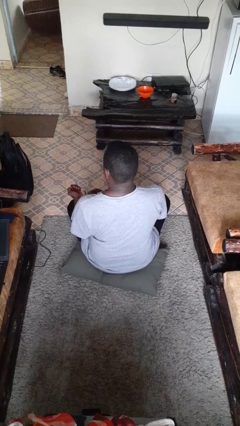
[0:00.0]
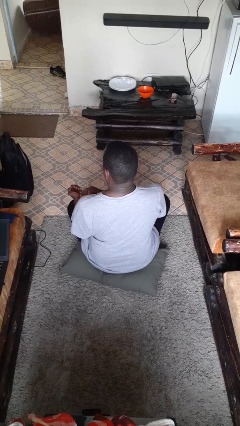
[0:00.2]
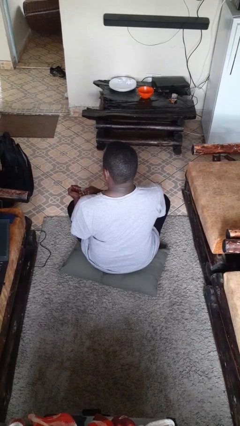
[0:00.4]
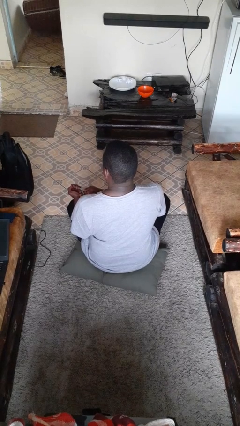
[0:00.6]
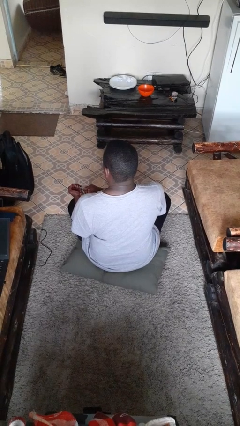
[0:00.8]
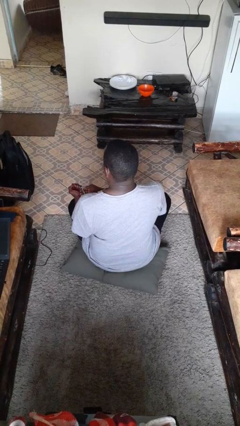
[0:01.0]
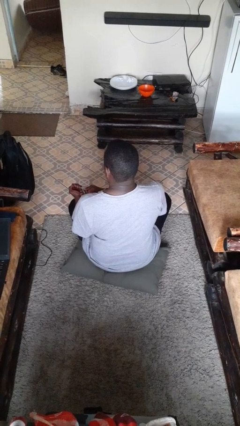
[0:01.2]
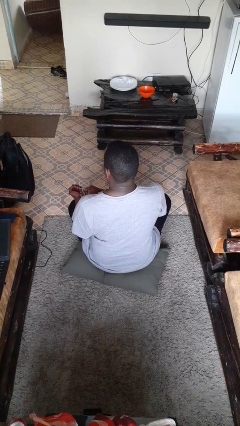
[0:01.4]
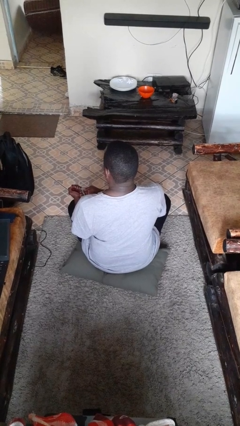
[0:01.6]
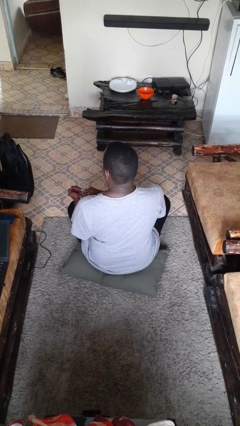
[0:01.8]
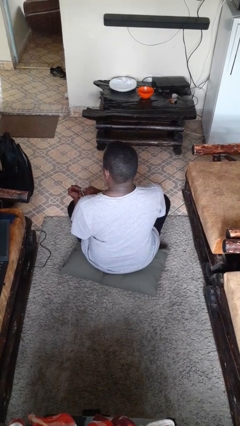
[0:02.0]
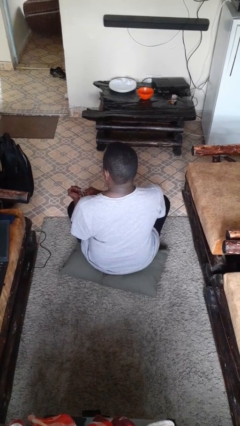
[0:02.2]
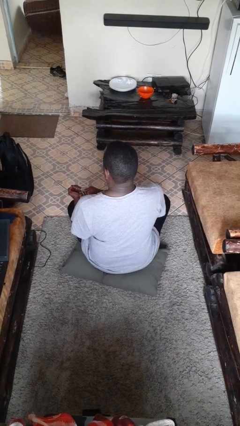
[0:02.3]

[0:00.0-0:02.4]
person clips fingernails

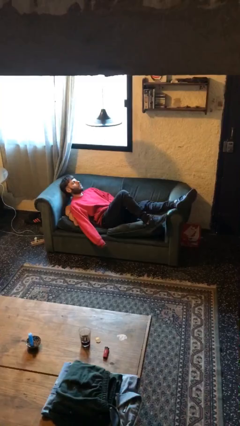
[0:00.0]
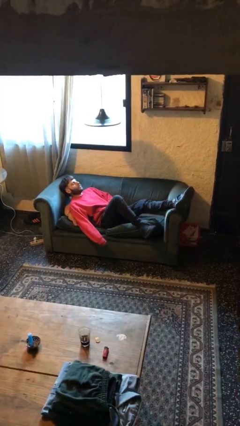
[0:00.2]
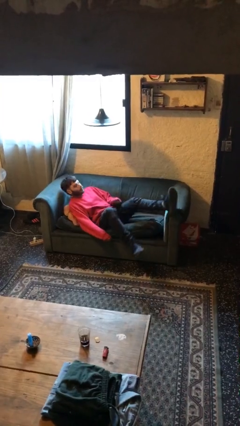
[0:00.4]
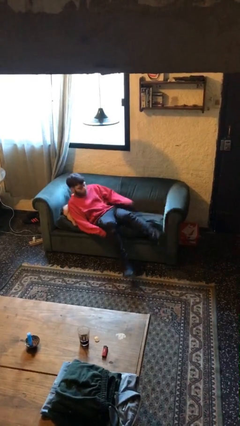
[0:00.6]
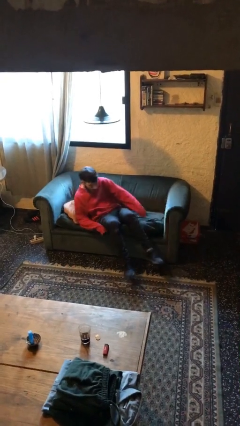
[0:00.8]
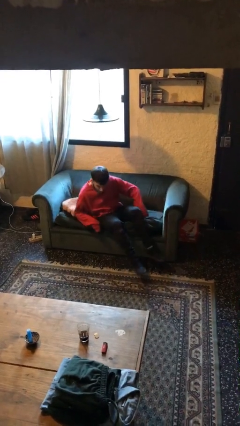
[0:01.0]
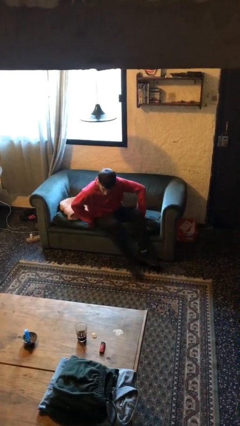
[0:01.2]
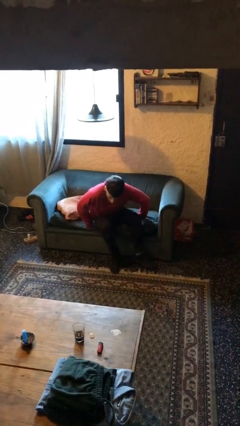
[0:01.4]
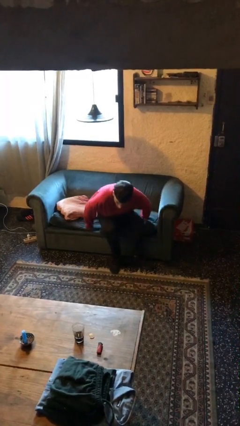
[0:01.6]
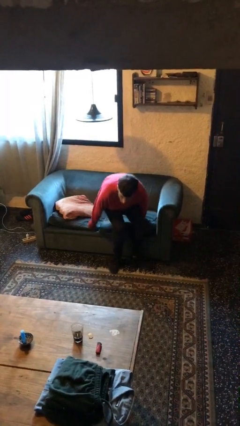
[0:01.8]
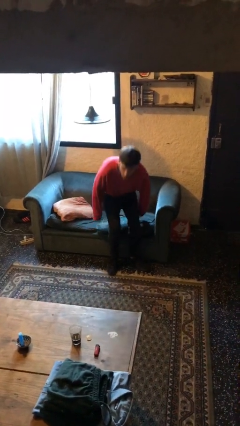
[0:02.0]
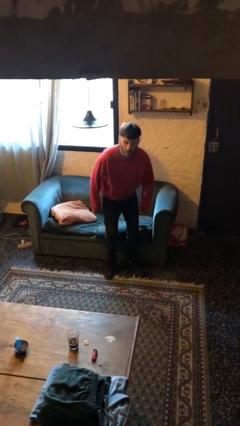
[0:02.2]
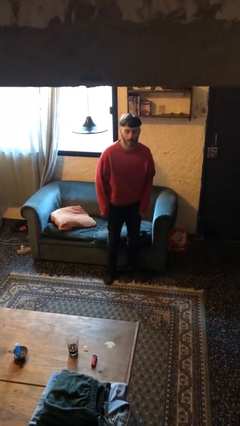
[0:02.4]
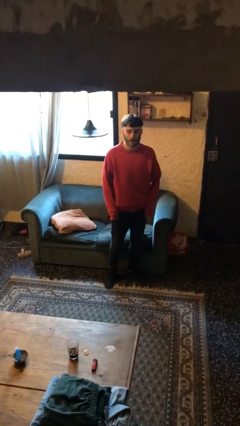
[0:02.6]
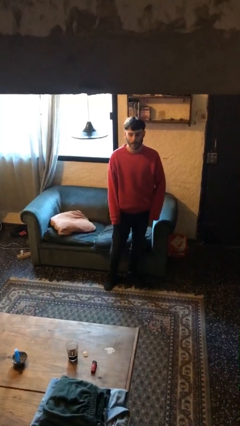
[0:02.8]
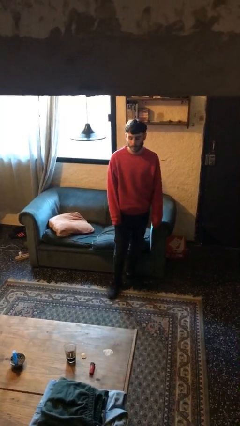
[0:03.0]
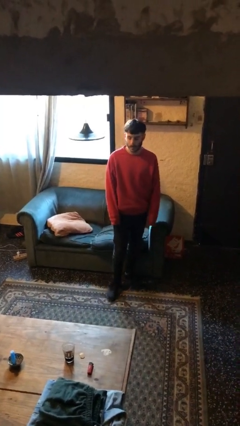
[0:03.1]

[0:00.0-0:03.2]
person stands up

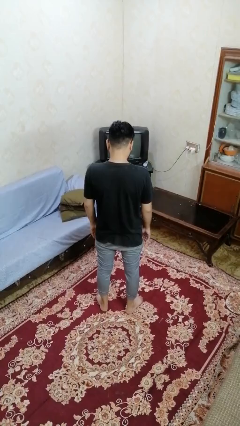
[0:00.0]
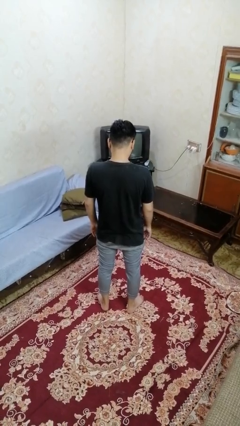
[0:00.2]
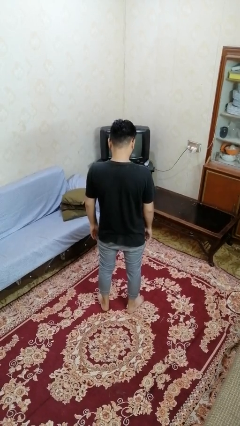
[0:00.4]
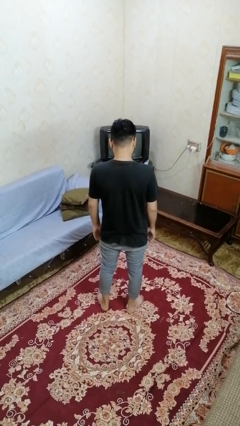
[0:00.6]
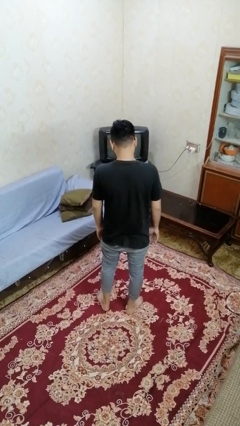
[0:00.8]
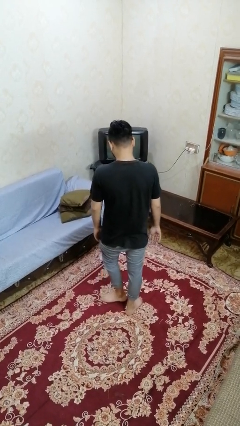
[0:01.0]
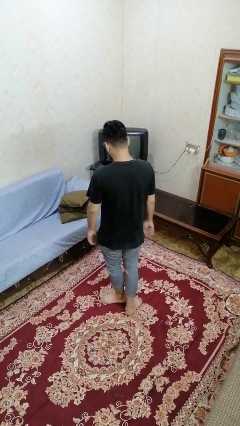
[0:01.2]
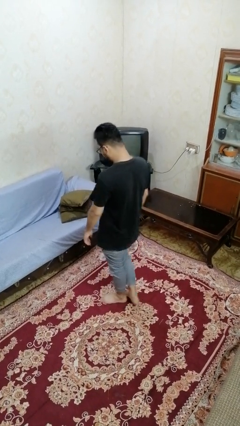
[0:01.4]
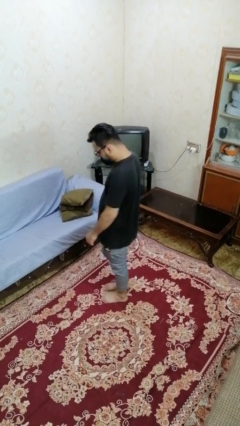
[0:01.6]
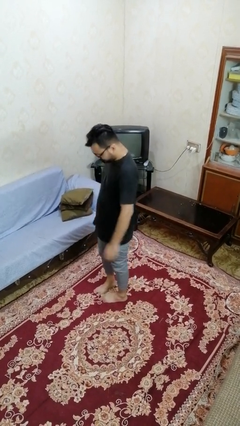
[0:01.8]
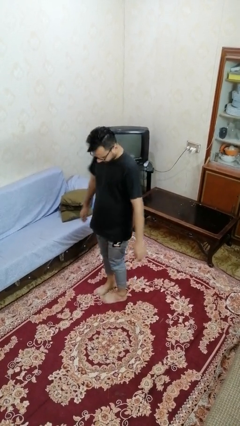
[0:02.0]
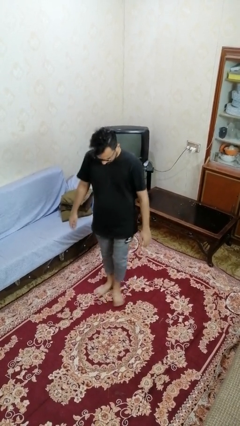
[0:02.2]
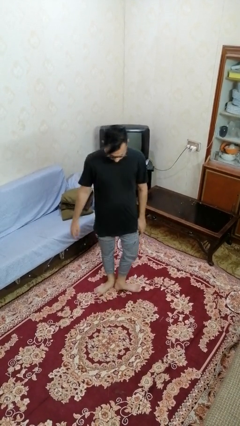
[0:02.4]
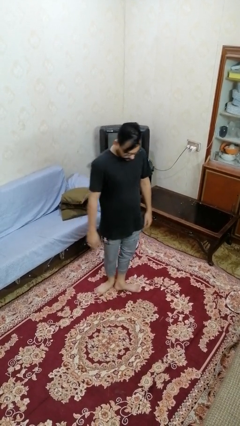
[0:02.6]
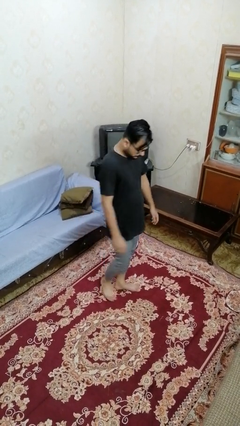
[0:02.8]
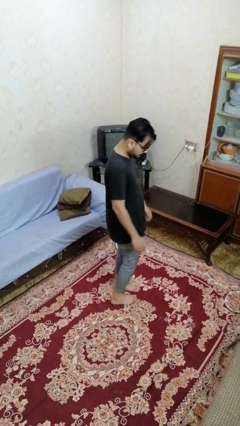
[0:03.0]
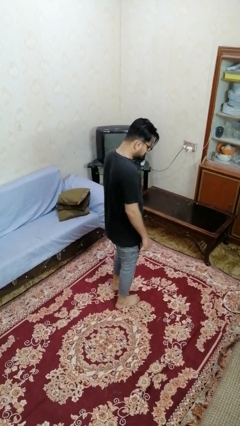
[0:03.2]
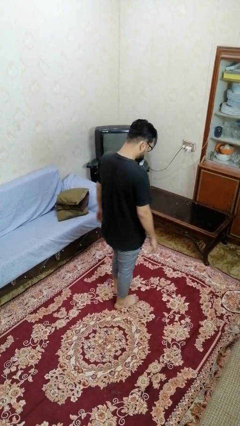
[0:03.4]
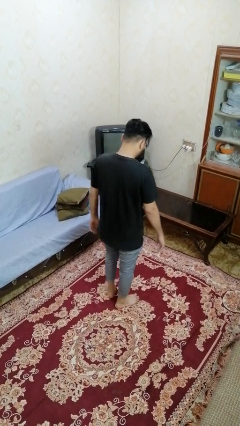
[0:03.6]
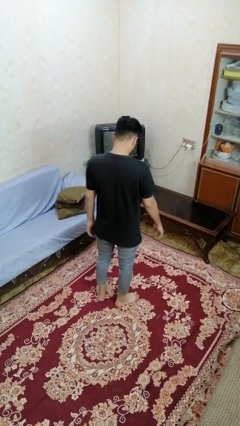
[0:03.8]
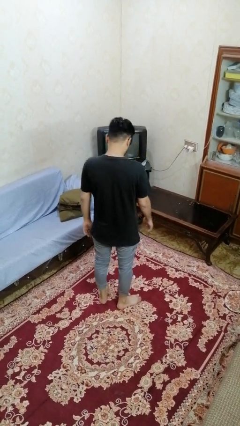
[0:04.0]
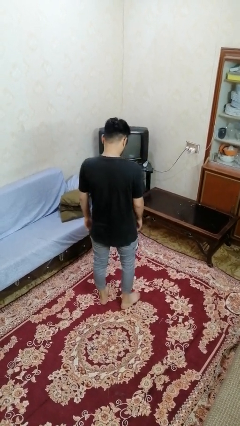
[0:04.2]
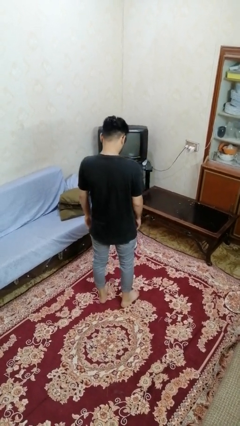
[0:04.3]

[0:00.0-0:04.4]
person twirls

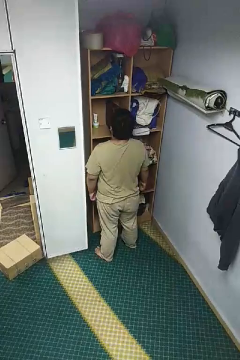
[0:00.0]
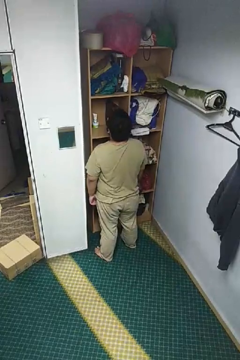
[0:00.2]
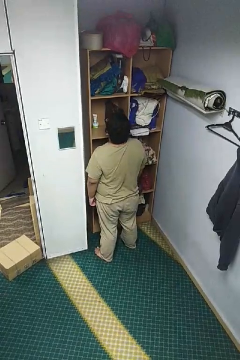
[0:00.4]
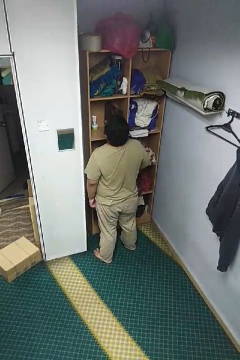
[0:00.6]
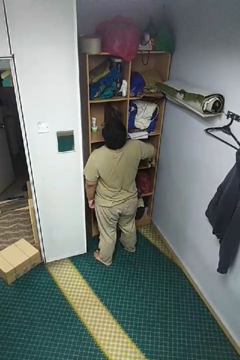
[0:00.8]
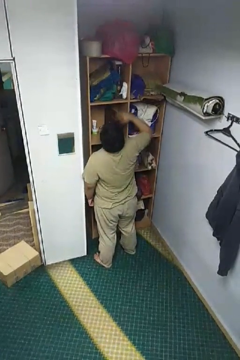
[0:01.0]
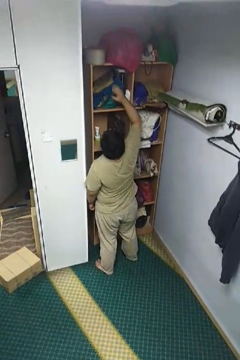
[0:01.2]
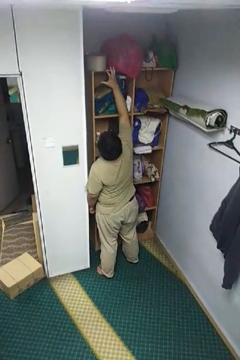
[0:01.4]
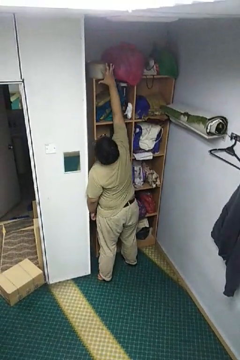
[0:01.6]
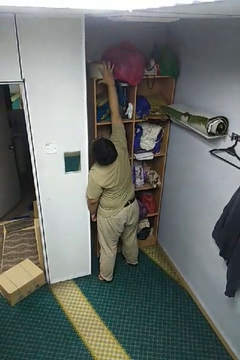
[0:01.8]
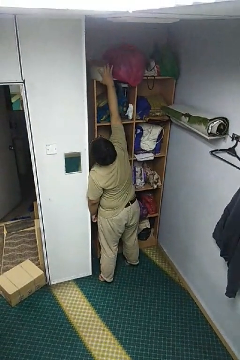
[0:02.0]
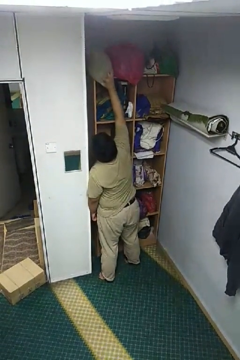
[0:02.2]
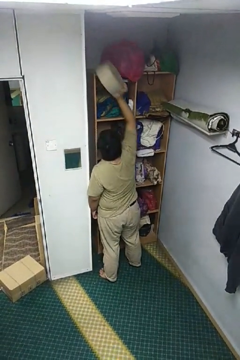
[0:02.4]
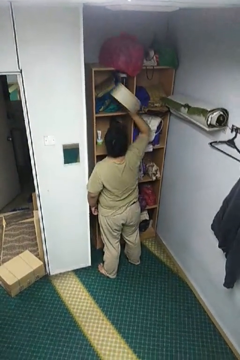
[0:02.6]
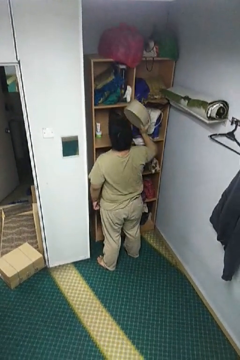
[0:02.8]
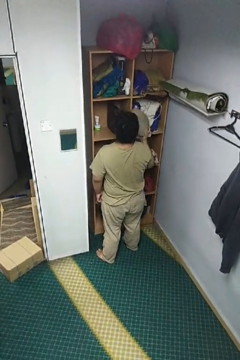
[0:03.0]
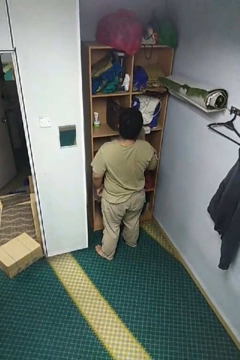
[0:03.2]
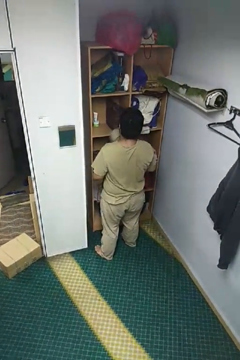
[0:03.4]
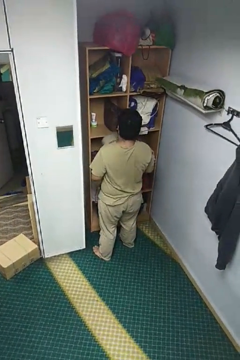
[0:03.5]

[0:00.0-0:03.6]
person picks up object from shelf

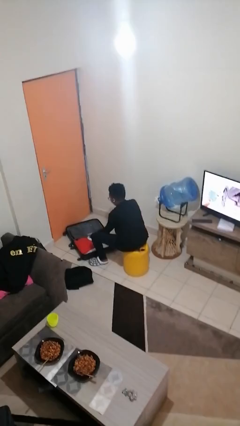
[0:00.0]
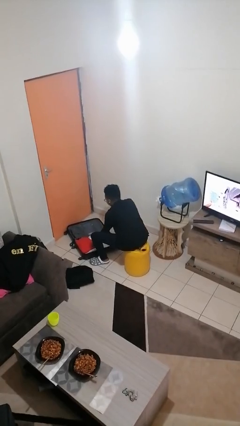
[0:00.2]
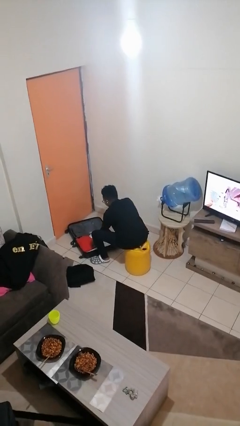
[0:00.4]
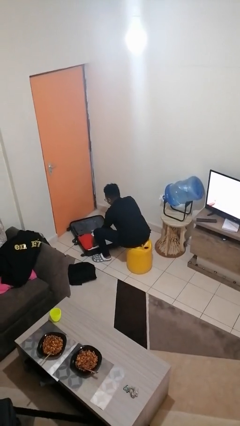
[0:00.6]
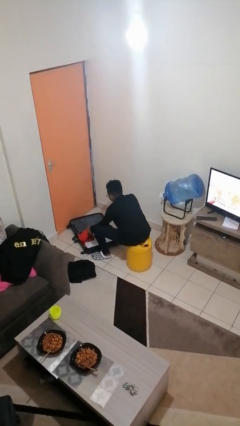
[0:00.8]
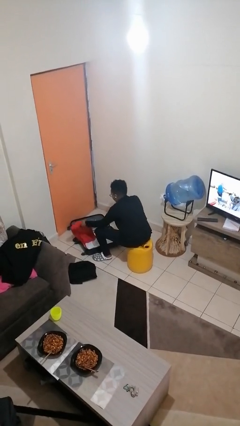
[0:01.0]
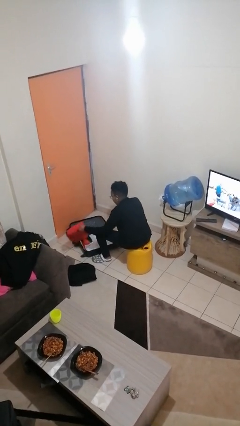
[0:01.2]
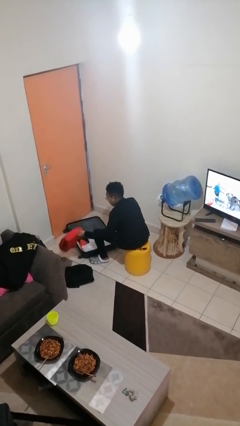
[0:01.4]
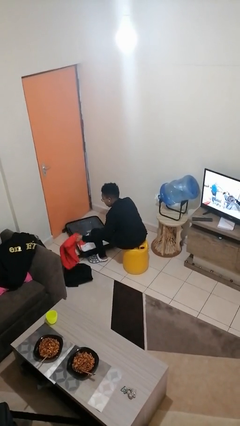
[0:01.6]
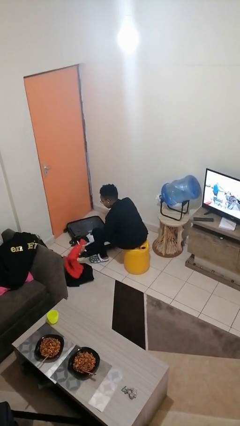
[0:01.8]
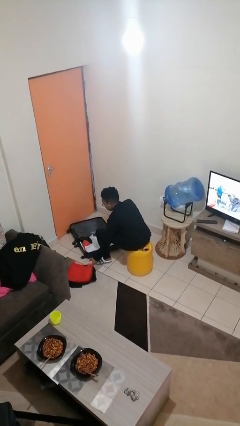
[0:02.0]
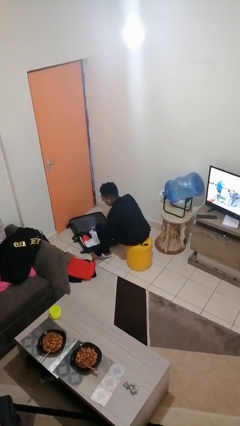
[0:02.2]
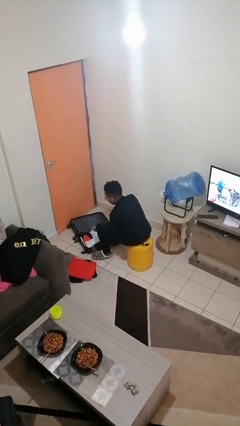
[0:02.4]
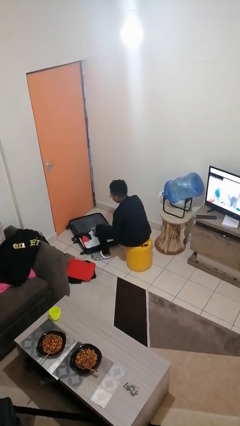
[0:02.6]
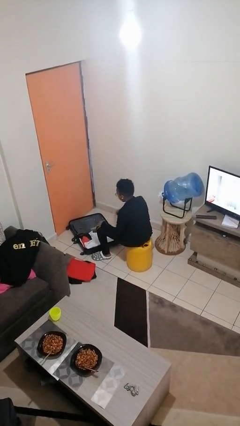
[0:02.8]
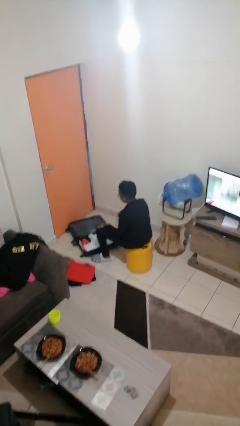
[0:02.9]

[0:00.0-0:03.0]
person unloads clothes from suitcase

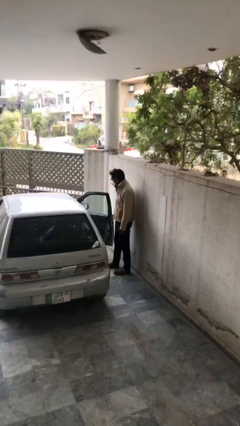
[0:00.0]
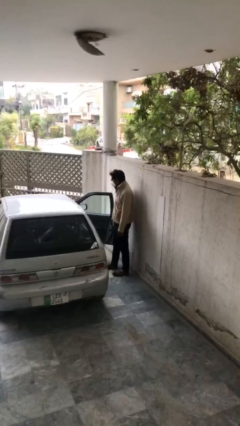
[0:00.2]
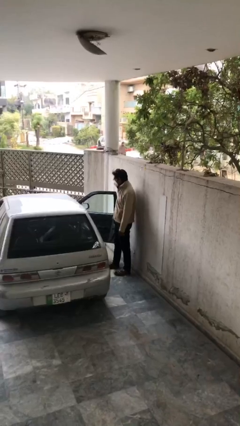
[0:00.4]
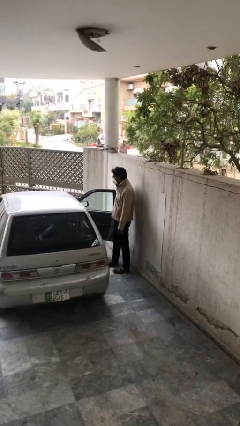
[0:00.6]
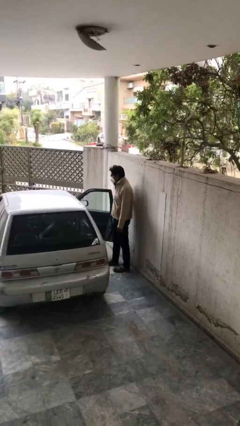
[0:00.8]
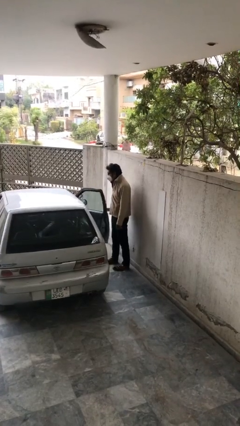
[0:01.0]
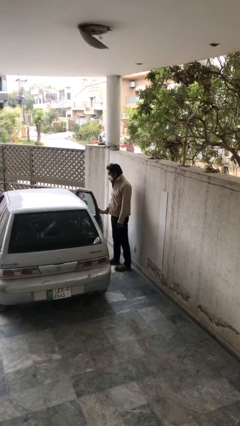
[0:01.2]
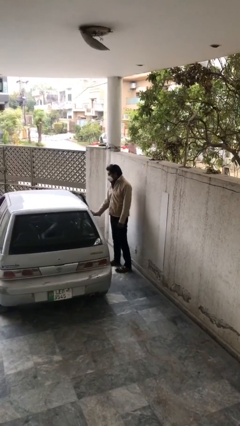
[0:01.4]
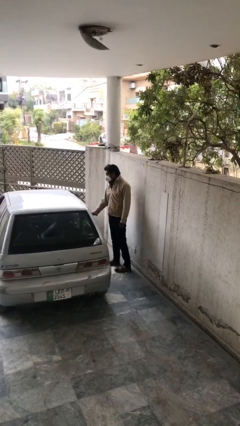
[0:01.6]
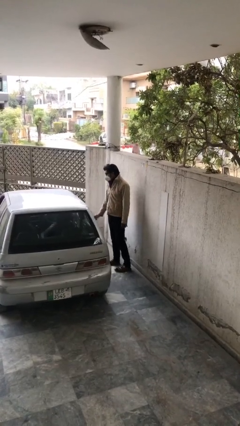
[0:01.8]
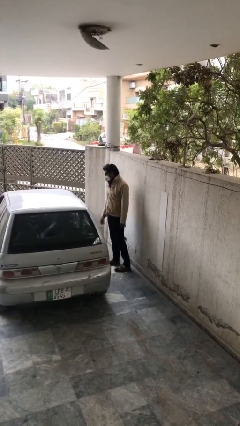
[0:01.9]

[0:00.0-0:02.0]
person closes car door
